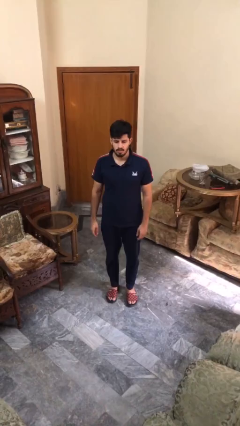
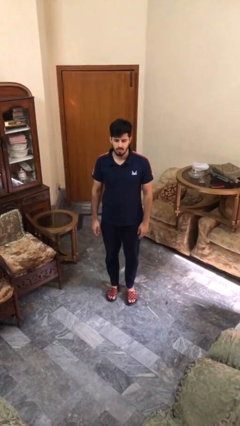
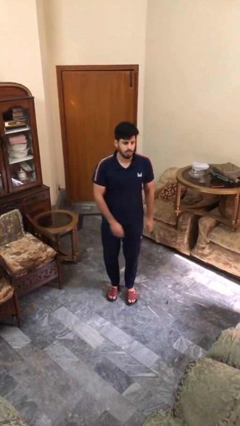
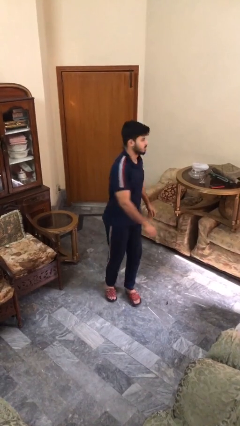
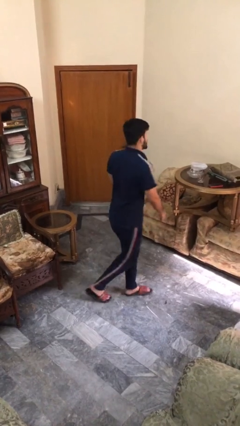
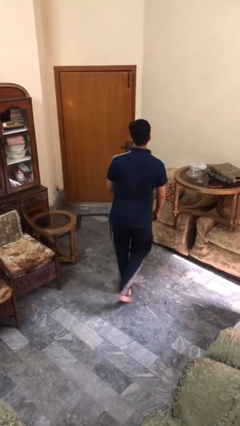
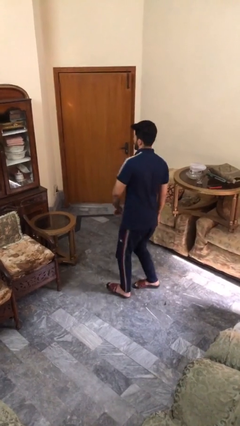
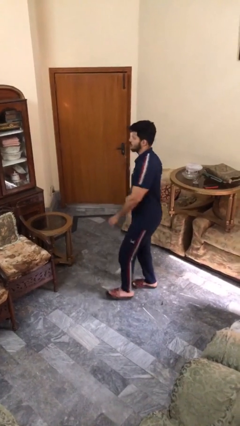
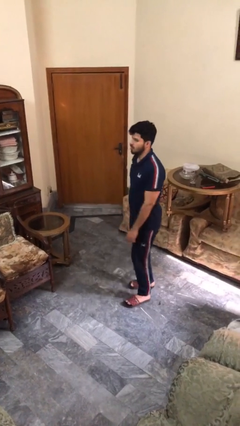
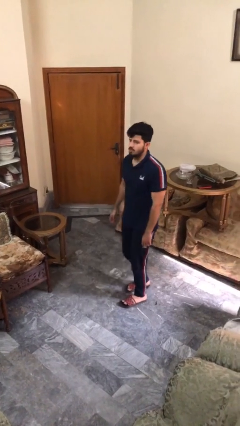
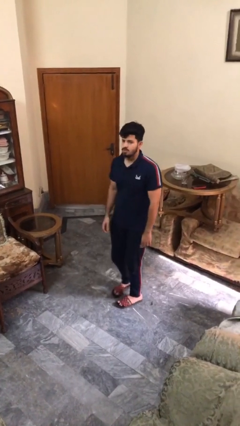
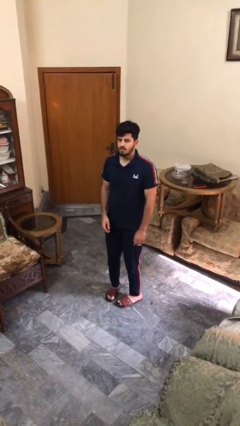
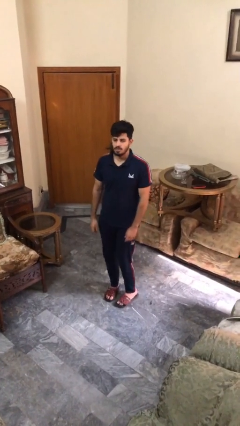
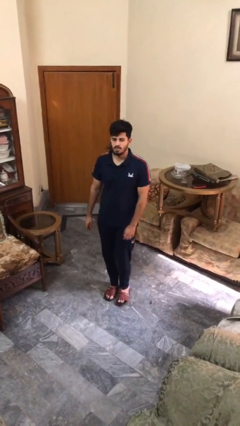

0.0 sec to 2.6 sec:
person twirls

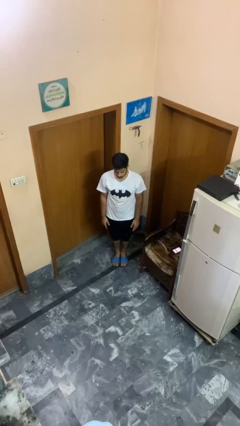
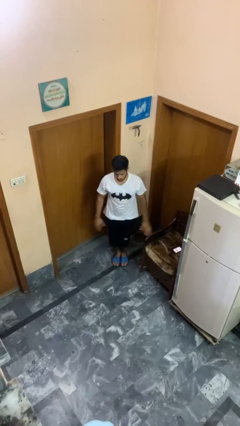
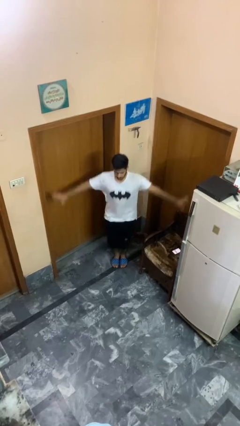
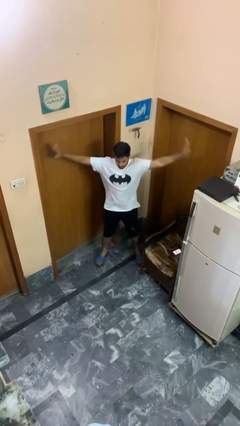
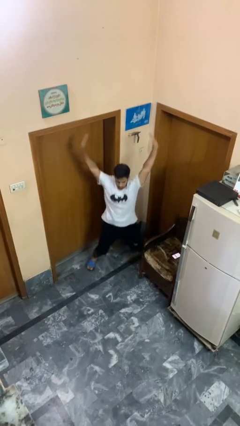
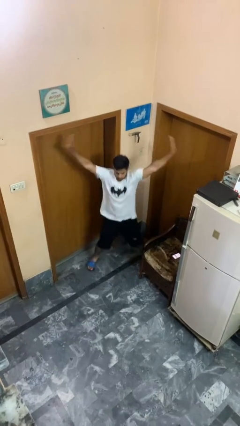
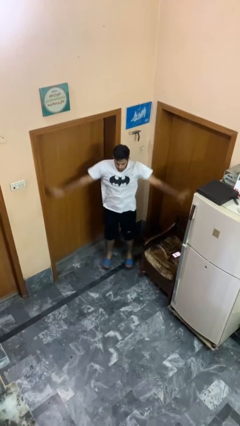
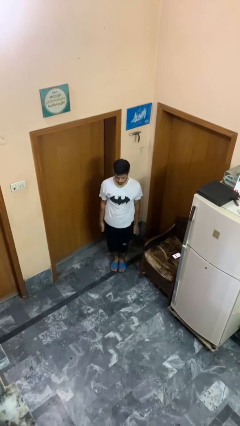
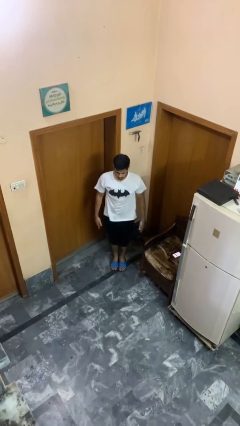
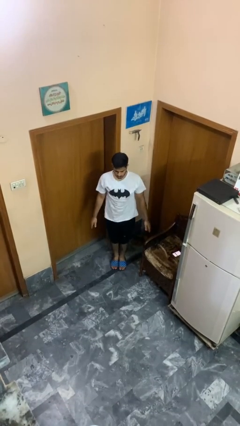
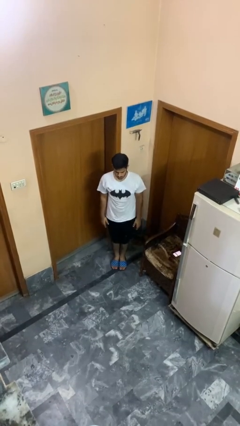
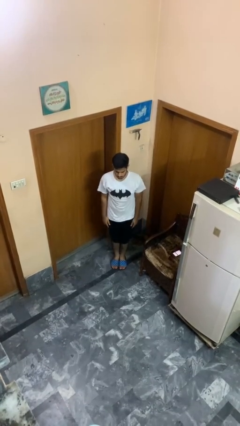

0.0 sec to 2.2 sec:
person exercises with jumping jacks

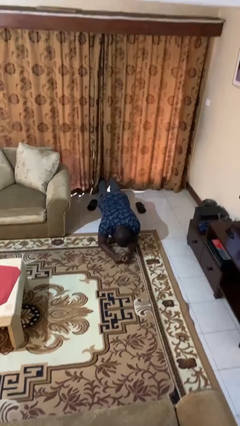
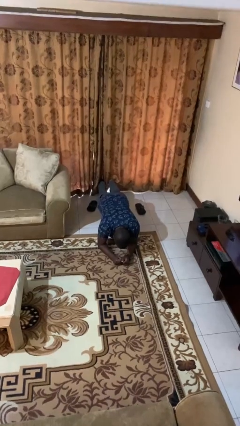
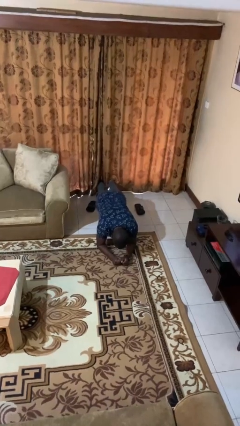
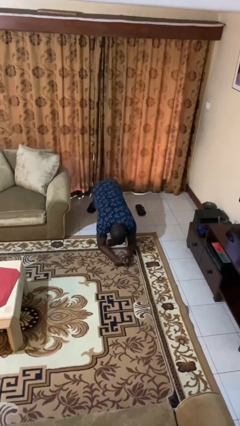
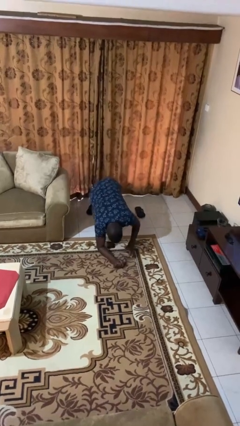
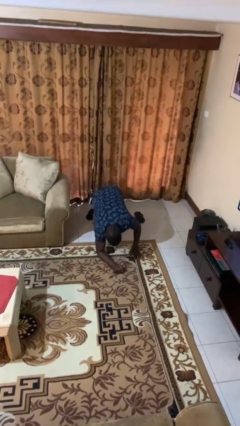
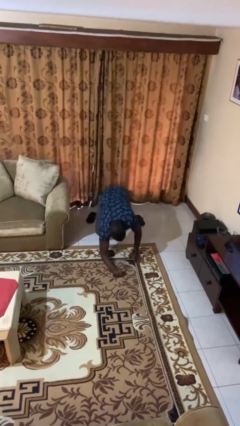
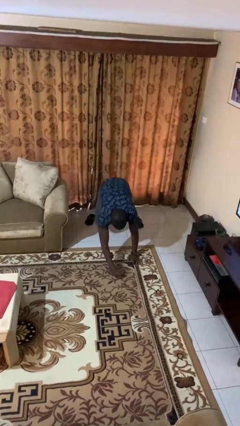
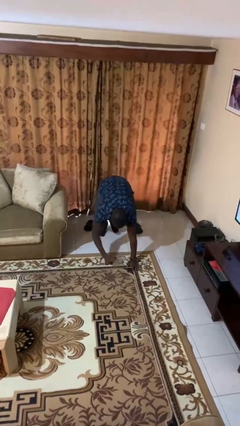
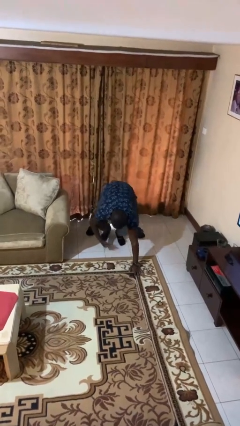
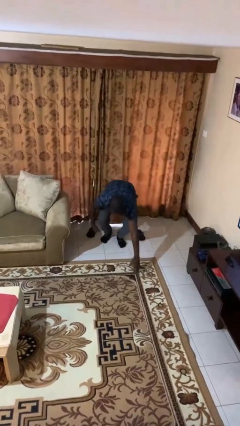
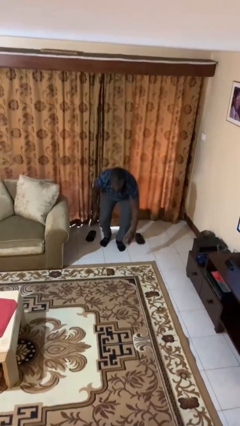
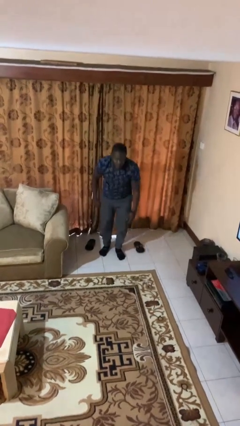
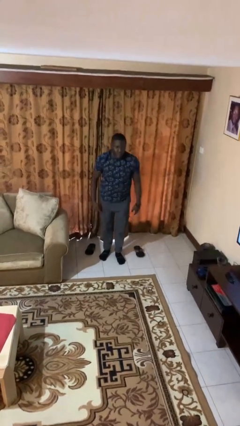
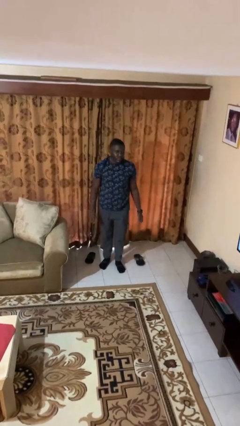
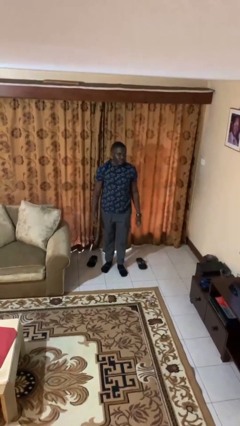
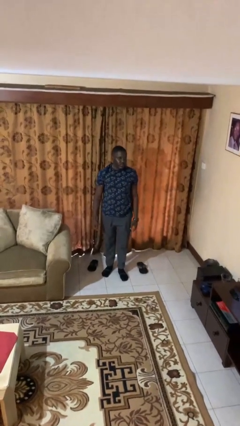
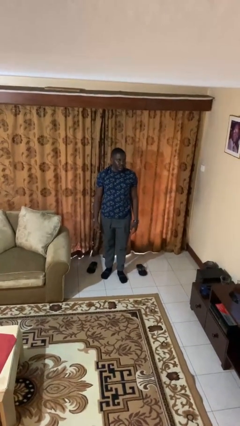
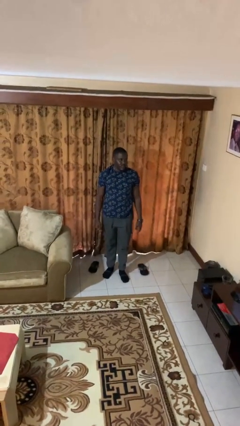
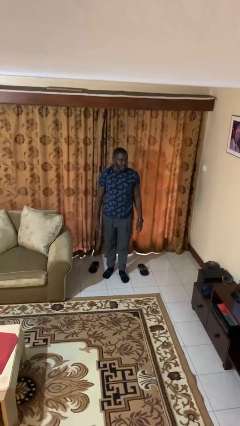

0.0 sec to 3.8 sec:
person stands up from floor

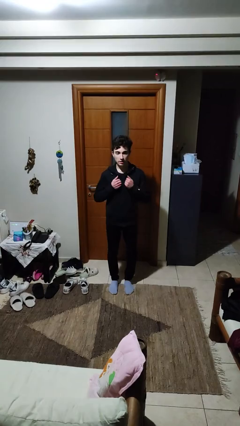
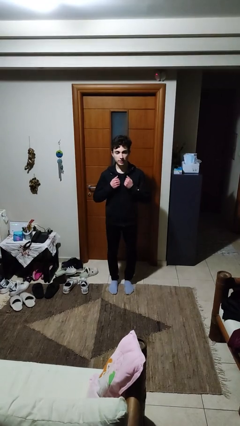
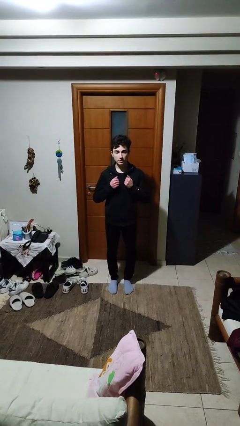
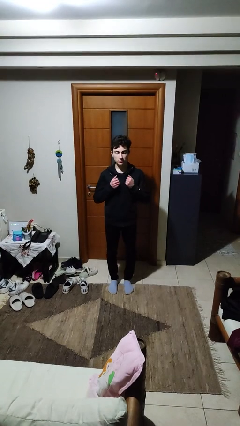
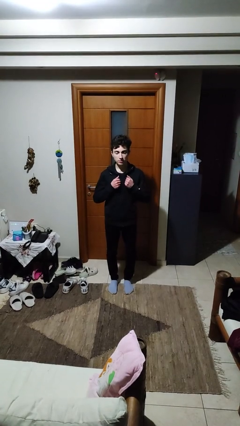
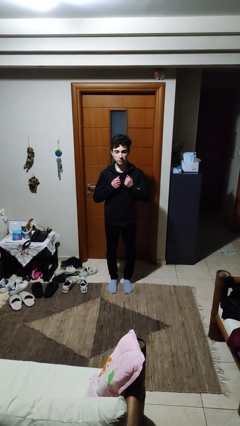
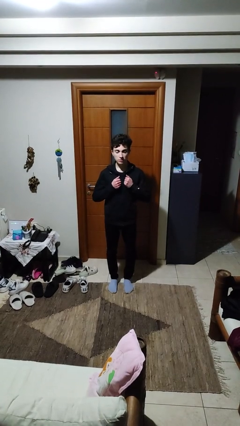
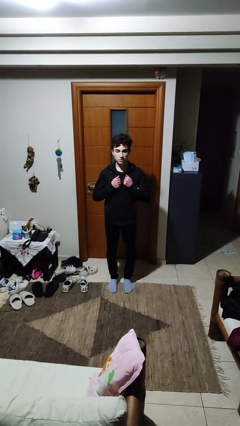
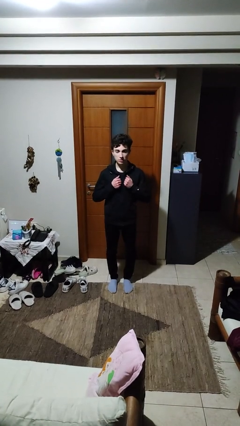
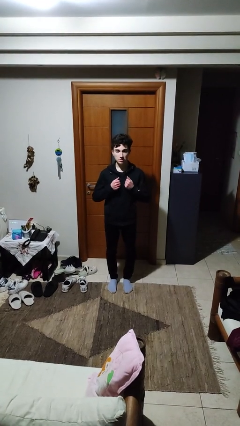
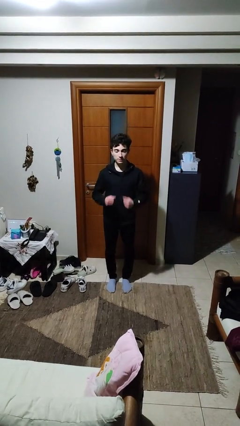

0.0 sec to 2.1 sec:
person drums on chest

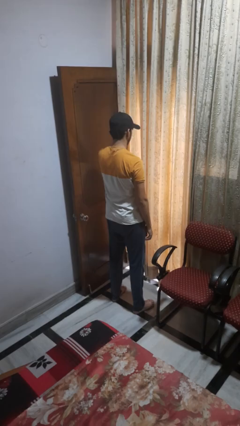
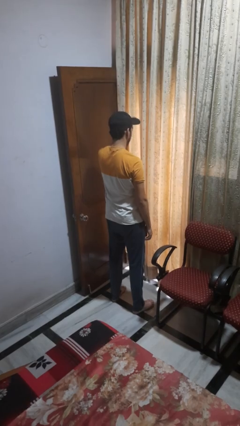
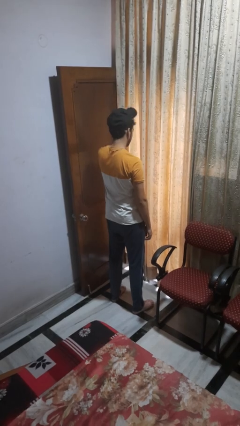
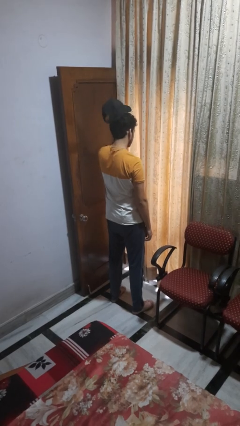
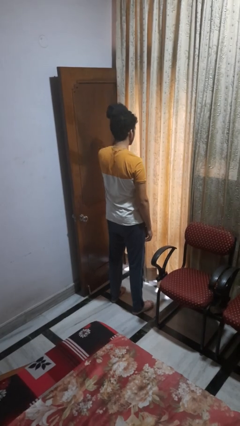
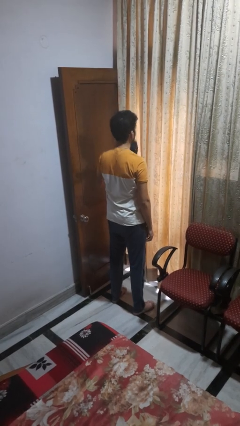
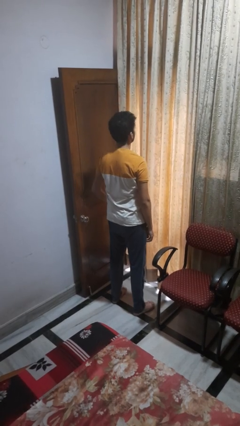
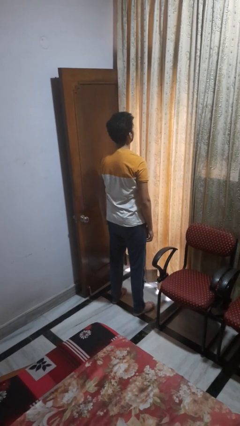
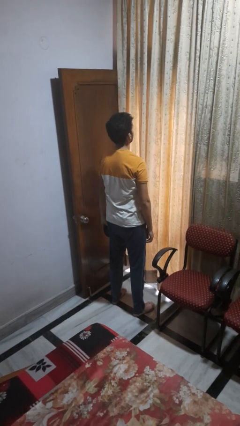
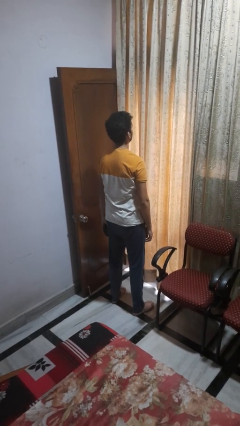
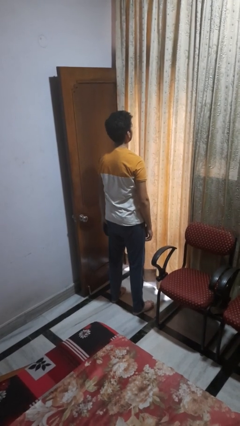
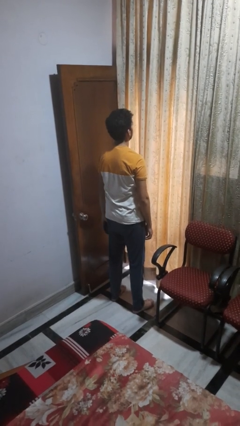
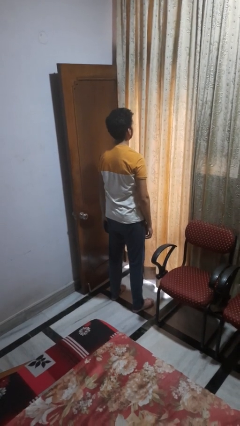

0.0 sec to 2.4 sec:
person takes off hat

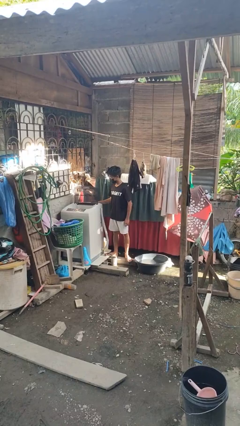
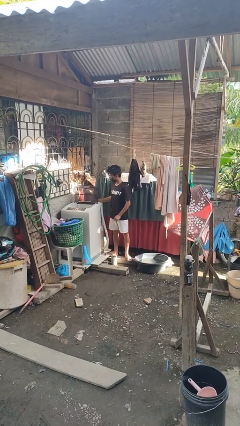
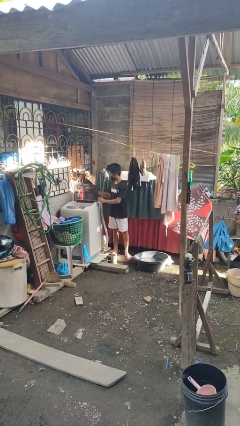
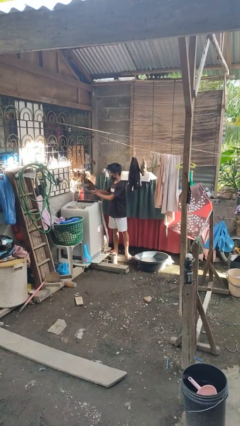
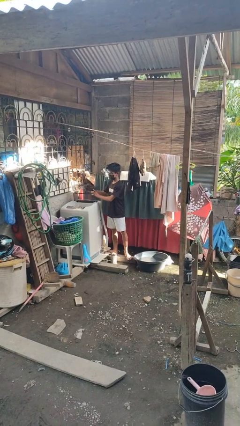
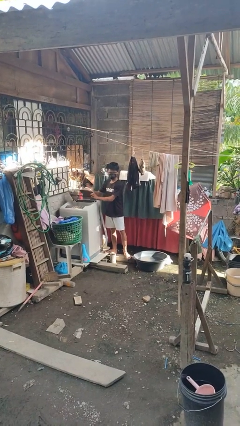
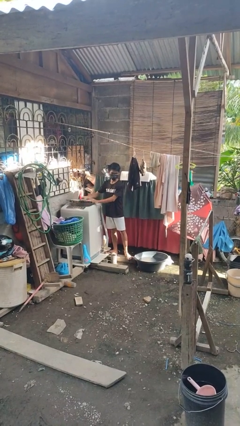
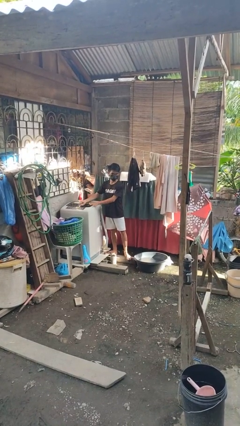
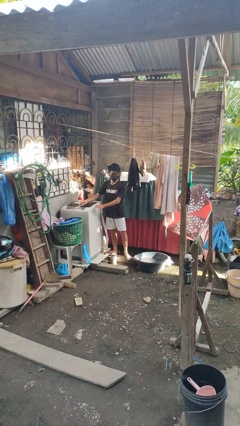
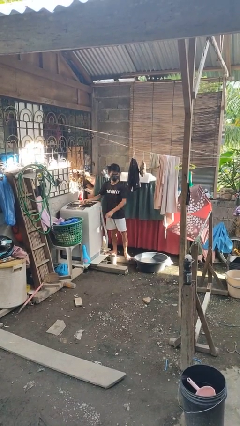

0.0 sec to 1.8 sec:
person closes clothes washer

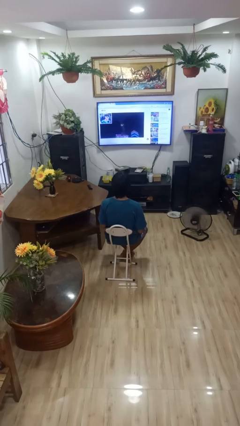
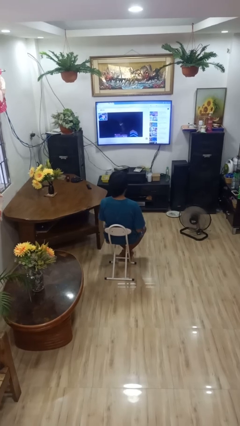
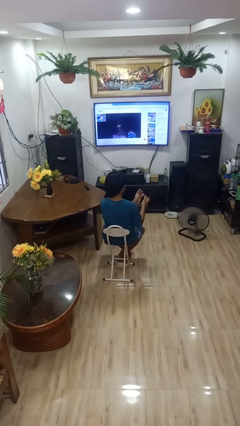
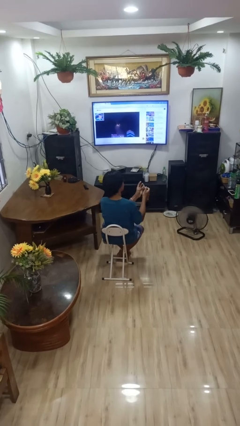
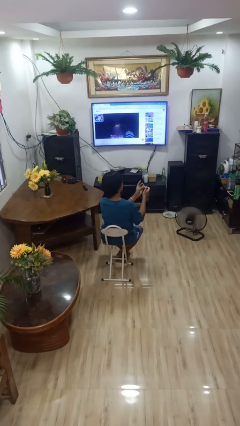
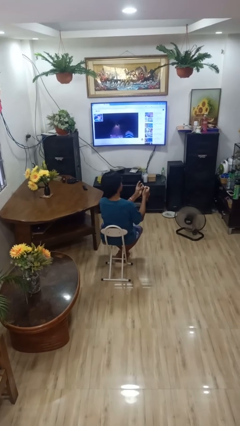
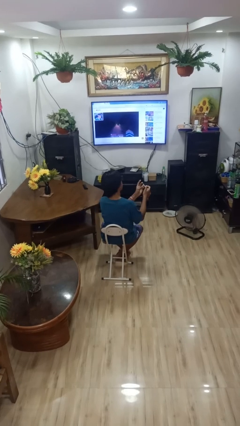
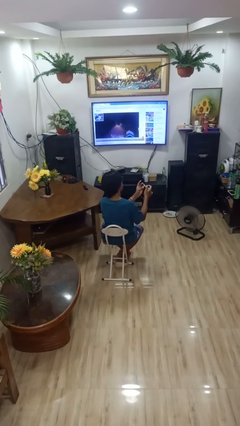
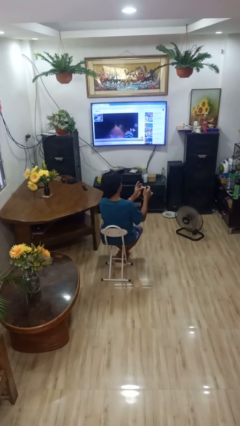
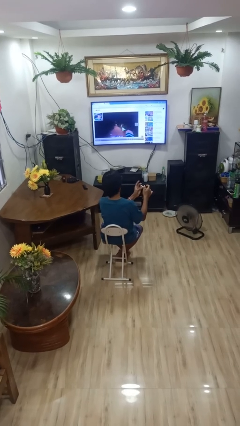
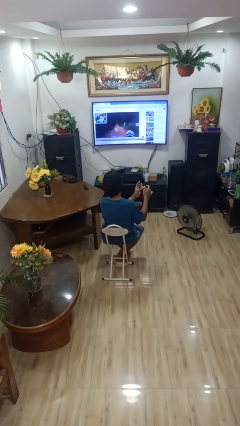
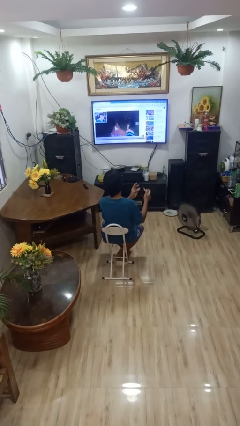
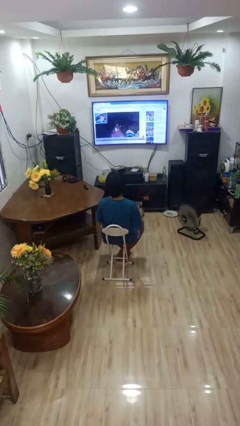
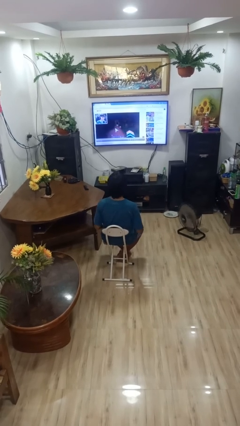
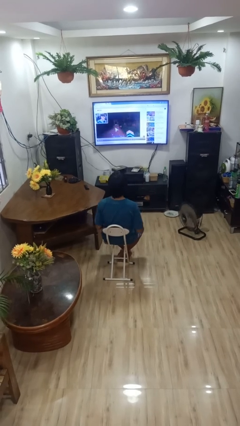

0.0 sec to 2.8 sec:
person files fingernails
